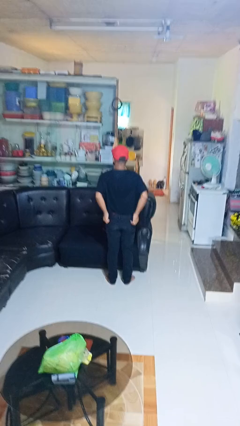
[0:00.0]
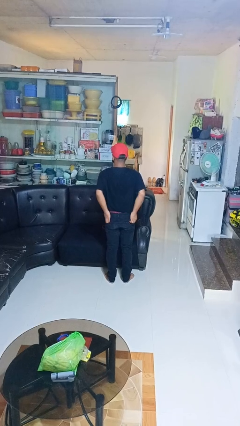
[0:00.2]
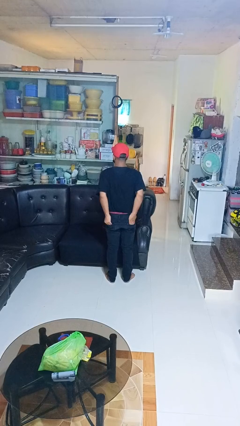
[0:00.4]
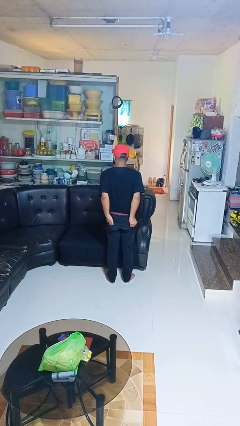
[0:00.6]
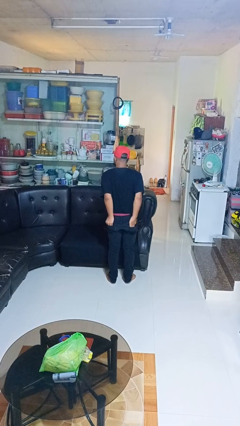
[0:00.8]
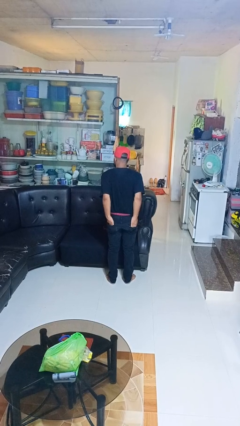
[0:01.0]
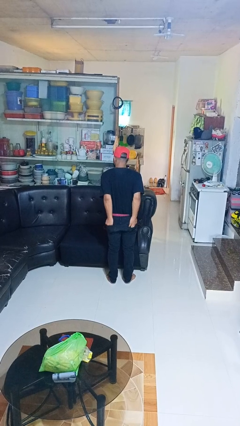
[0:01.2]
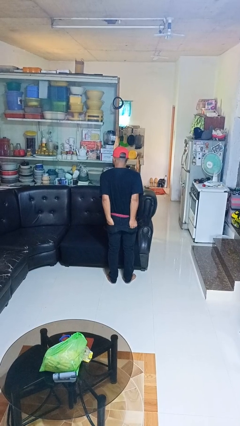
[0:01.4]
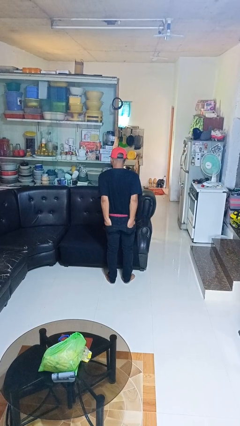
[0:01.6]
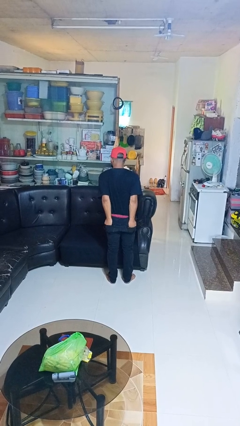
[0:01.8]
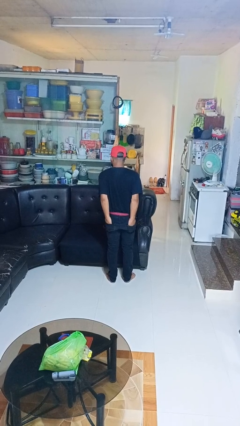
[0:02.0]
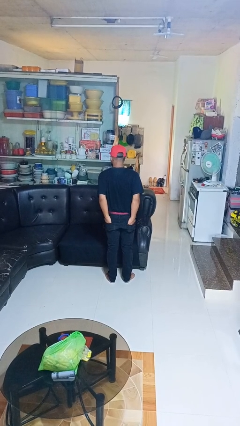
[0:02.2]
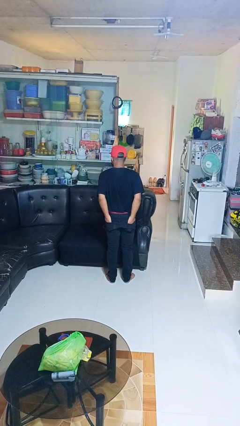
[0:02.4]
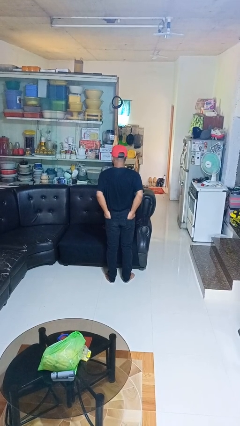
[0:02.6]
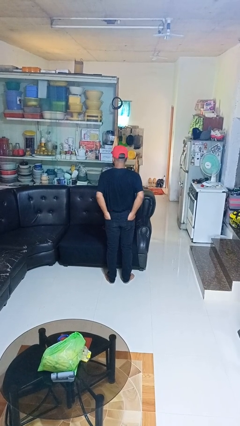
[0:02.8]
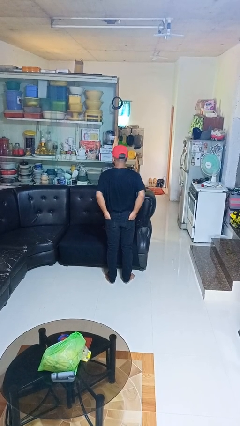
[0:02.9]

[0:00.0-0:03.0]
person puts hands in back pockets

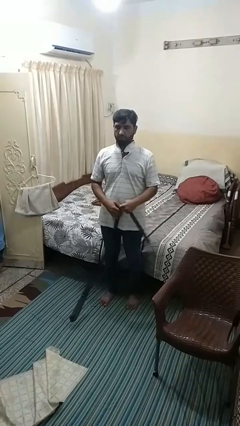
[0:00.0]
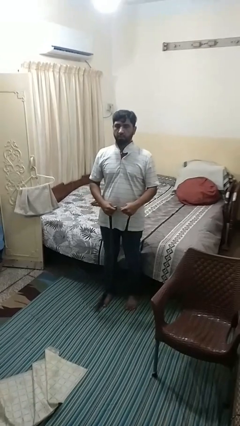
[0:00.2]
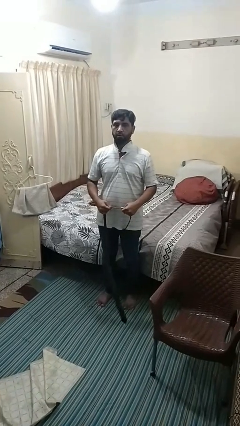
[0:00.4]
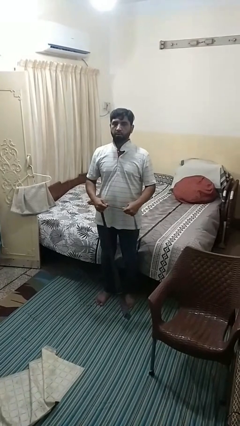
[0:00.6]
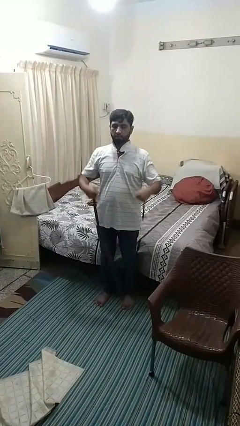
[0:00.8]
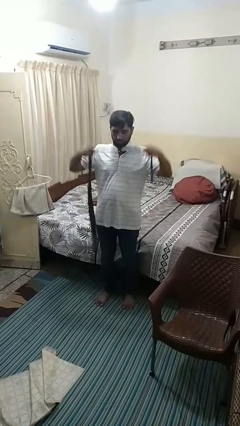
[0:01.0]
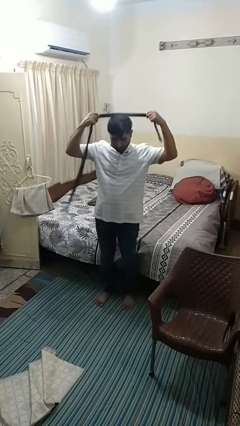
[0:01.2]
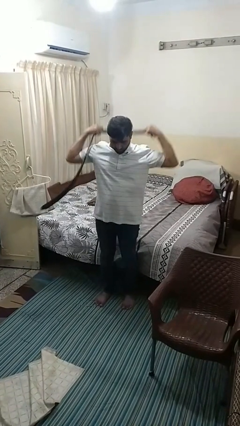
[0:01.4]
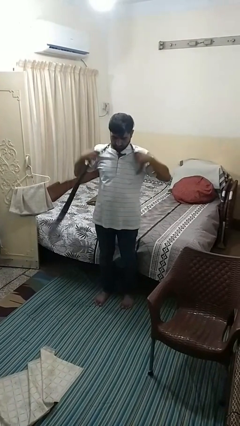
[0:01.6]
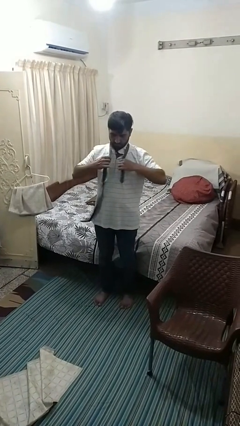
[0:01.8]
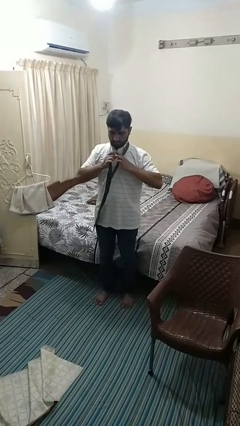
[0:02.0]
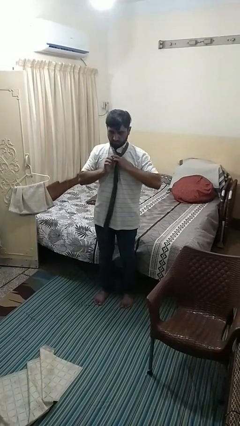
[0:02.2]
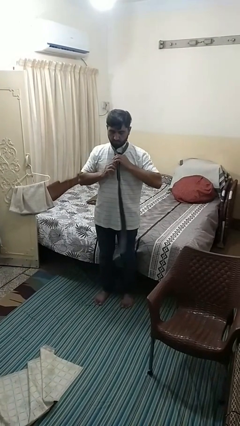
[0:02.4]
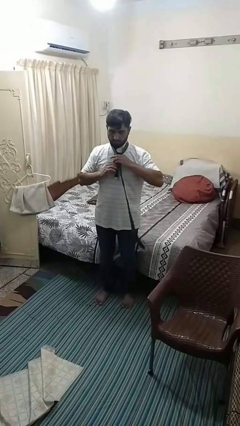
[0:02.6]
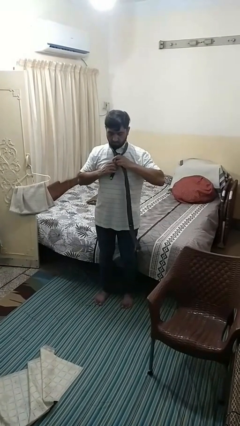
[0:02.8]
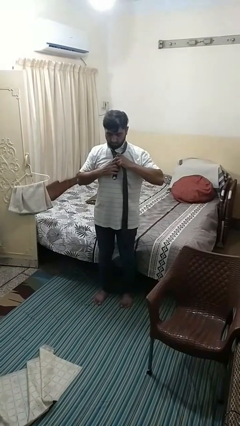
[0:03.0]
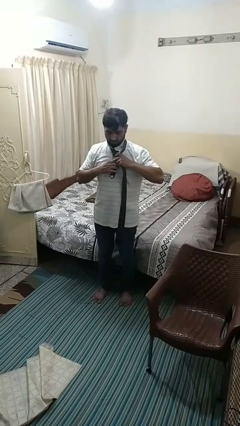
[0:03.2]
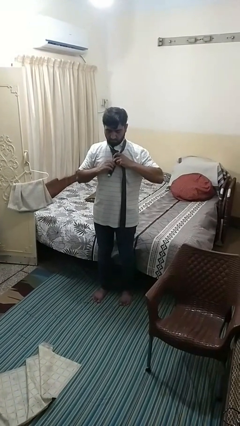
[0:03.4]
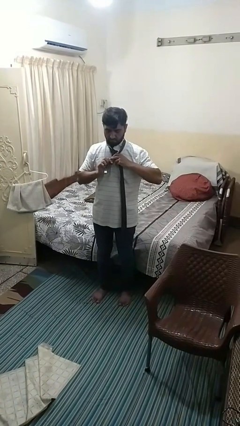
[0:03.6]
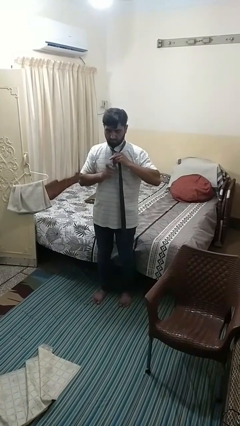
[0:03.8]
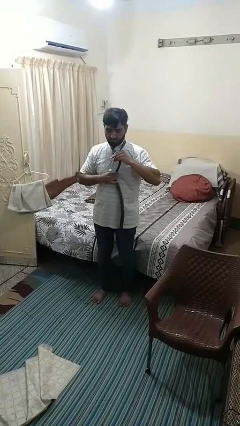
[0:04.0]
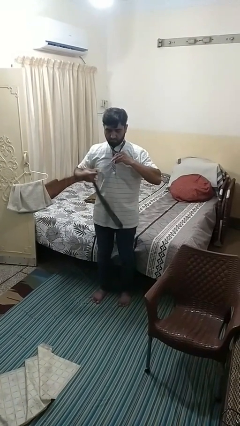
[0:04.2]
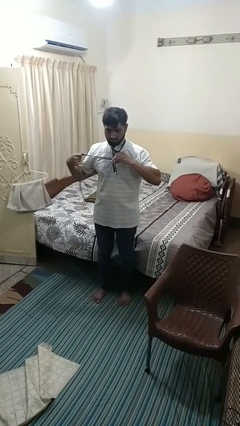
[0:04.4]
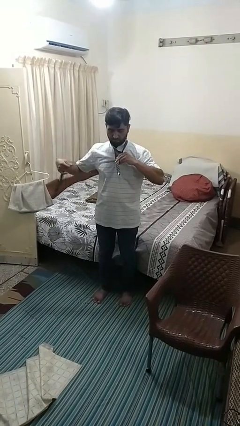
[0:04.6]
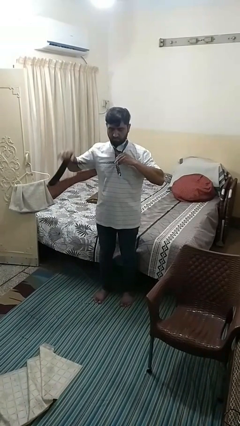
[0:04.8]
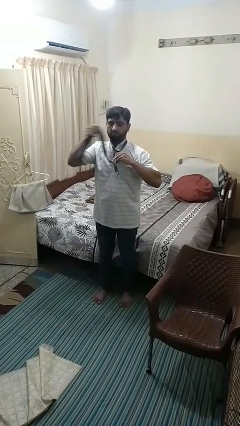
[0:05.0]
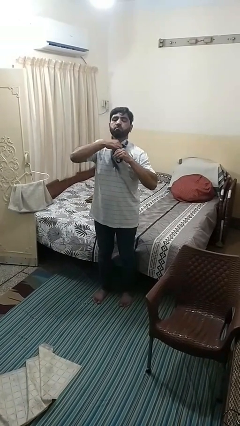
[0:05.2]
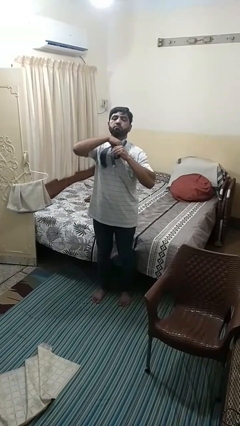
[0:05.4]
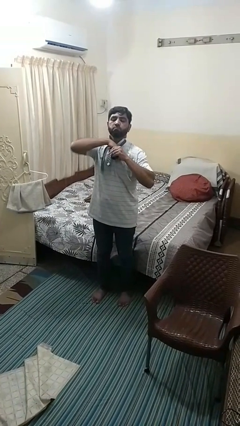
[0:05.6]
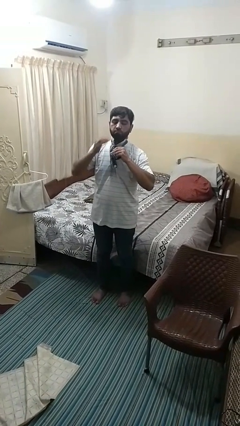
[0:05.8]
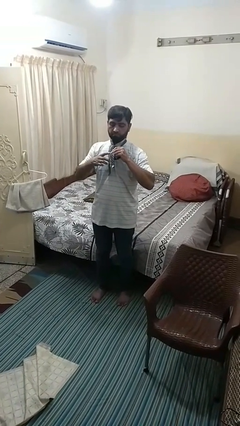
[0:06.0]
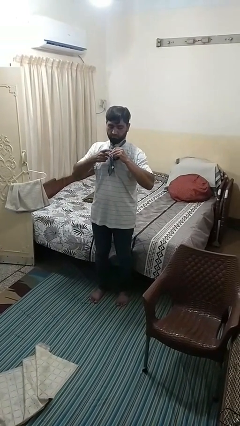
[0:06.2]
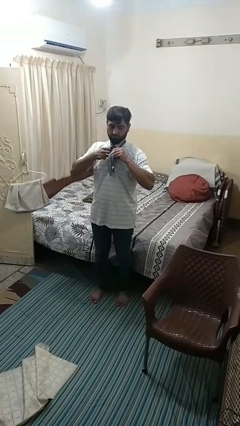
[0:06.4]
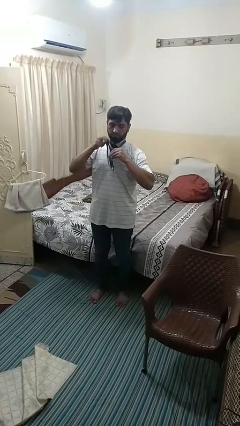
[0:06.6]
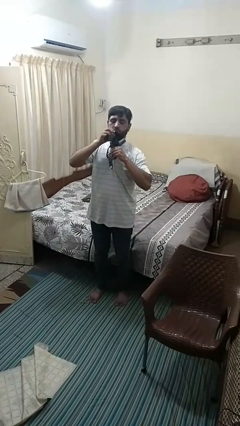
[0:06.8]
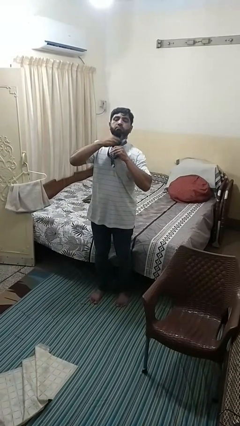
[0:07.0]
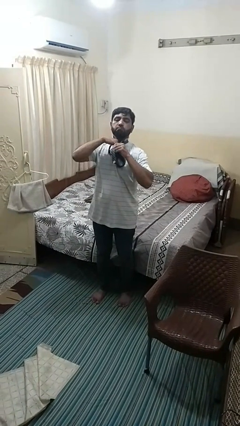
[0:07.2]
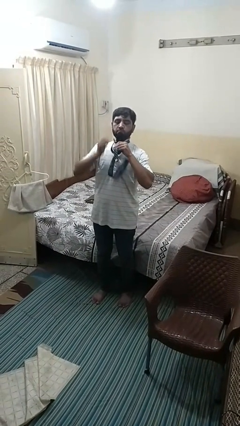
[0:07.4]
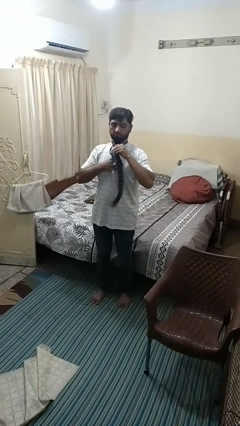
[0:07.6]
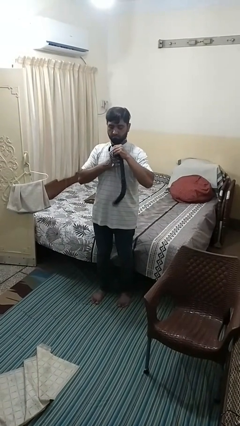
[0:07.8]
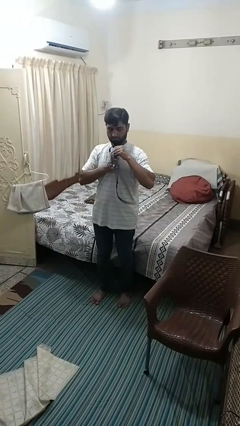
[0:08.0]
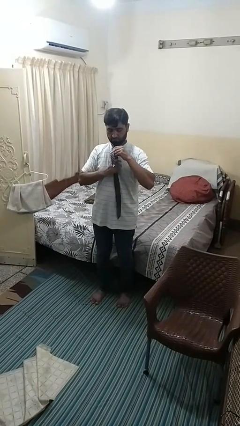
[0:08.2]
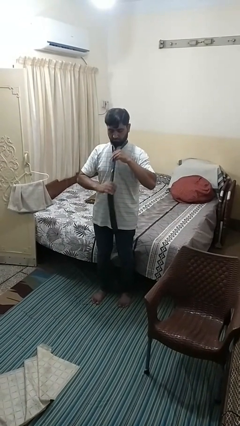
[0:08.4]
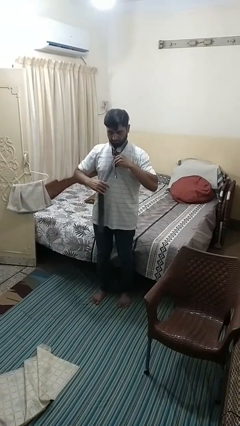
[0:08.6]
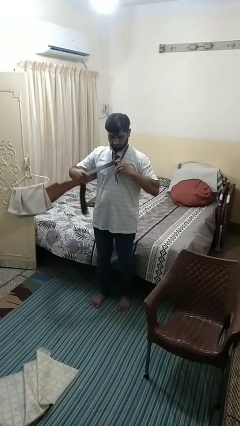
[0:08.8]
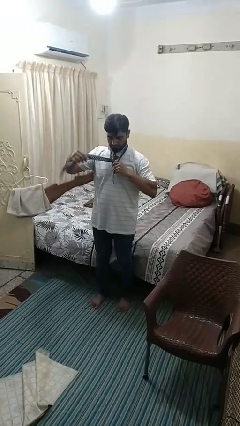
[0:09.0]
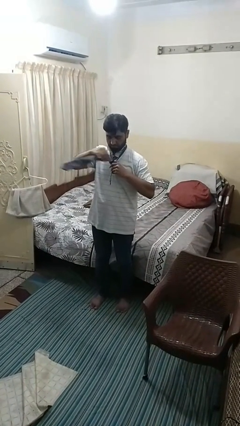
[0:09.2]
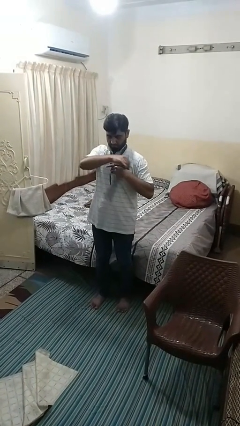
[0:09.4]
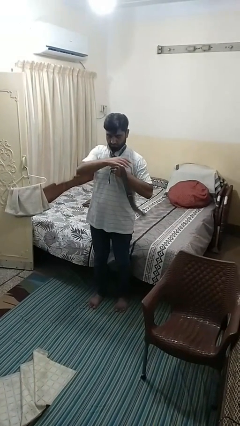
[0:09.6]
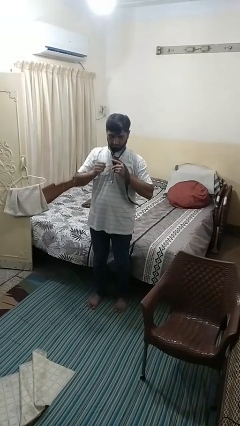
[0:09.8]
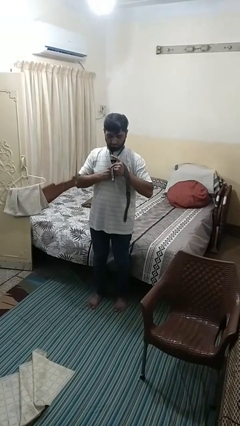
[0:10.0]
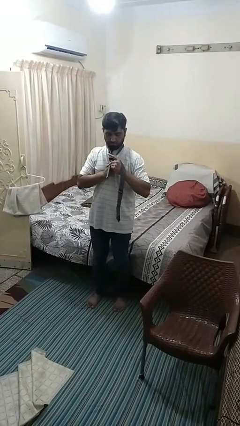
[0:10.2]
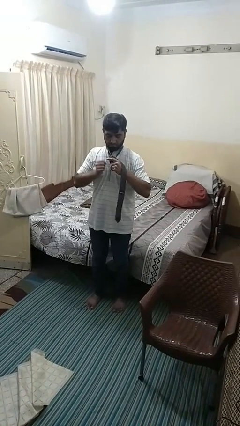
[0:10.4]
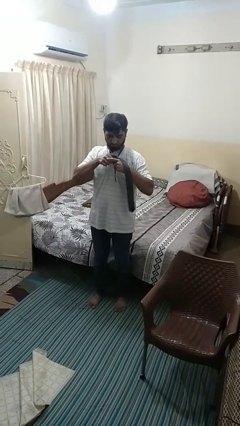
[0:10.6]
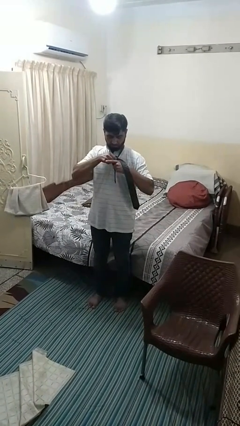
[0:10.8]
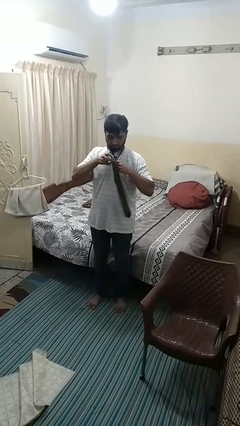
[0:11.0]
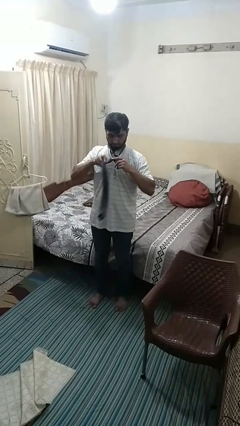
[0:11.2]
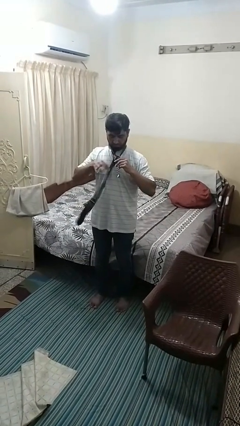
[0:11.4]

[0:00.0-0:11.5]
person puts on necktie

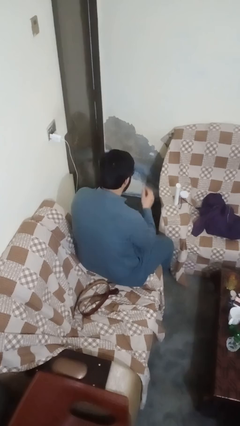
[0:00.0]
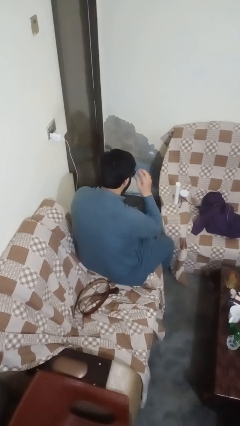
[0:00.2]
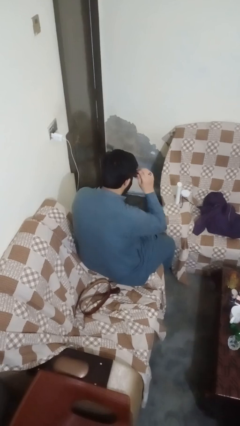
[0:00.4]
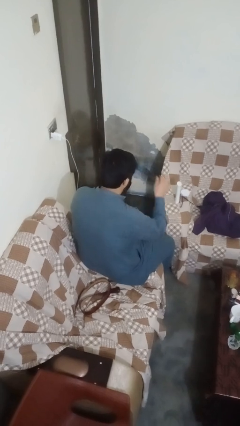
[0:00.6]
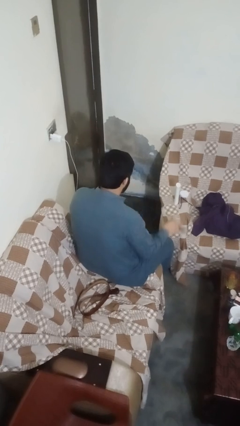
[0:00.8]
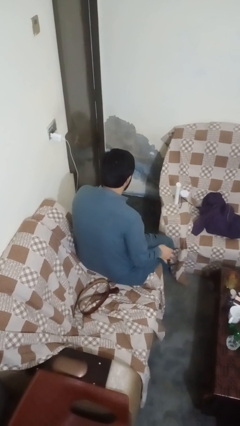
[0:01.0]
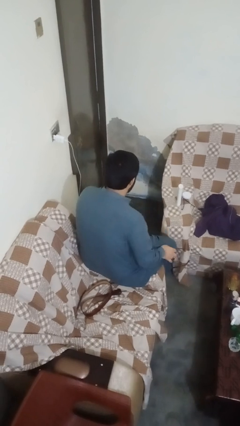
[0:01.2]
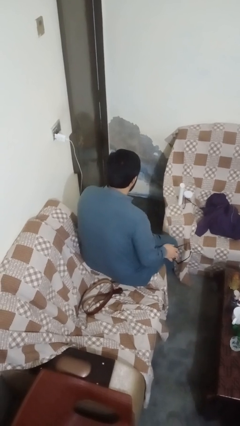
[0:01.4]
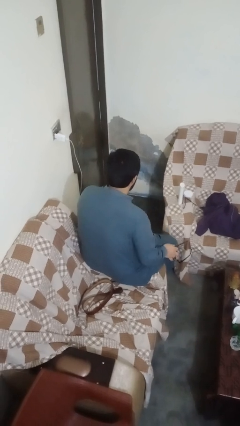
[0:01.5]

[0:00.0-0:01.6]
person takes off sunglasses

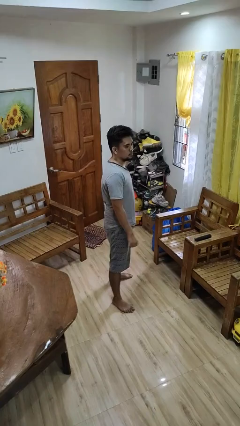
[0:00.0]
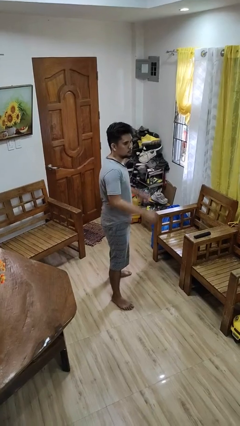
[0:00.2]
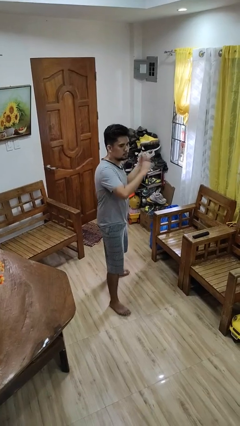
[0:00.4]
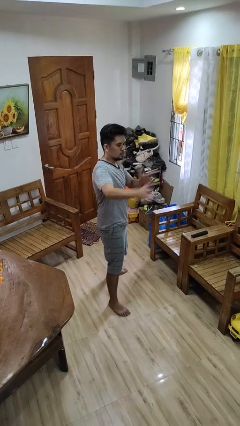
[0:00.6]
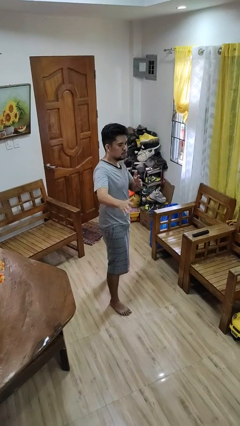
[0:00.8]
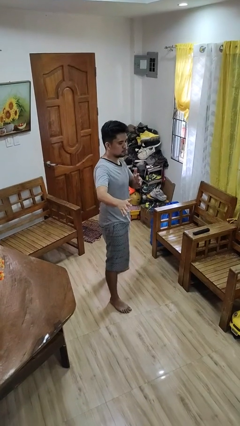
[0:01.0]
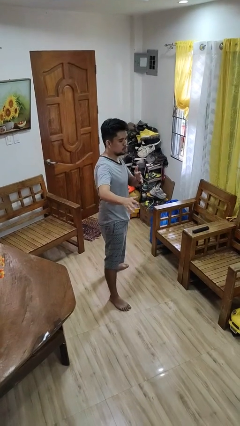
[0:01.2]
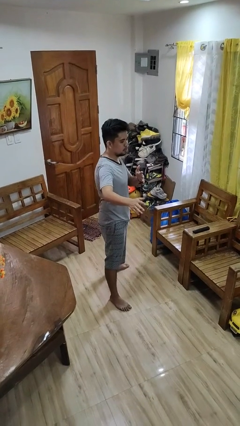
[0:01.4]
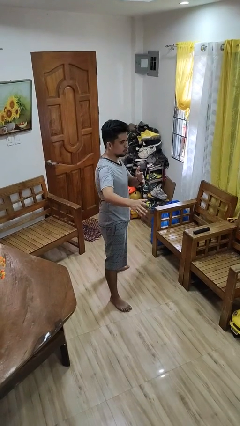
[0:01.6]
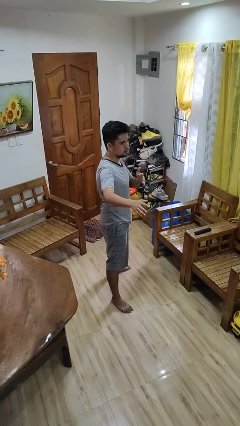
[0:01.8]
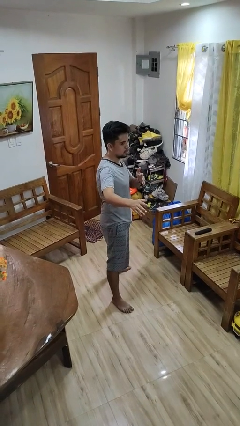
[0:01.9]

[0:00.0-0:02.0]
person karate chop
